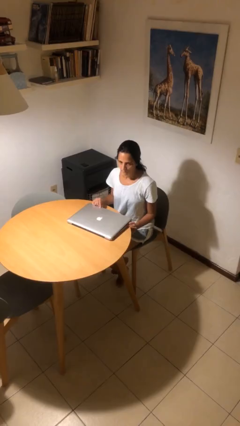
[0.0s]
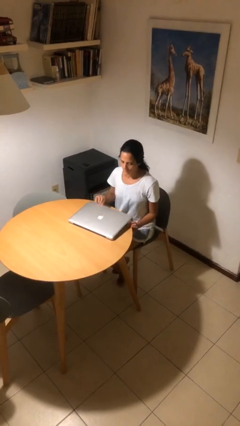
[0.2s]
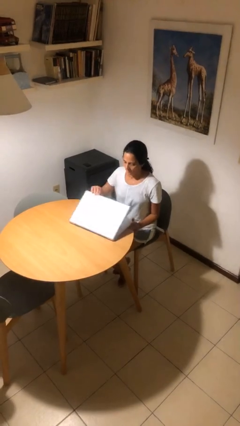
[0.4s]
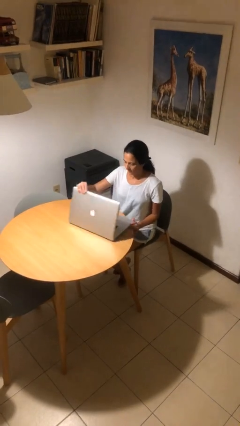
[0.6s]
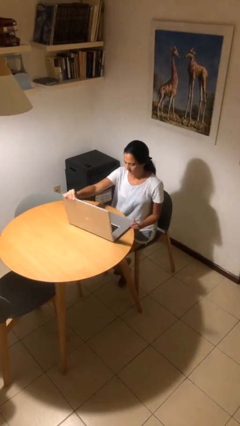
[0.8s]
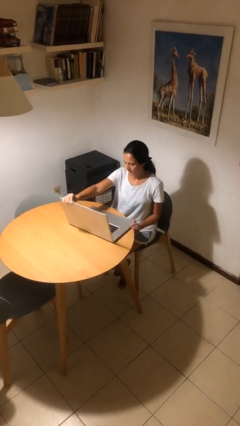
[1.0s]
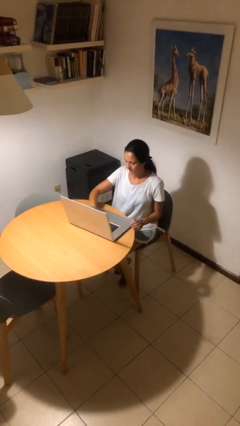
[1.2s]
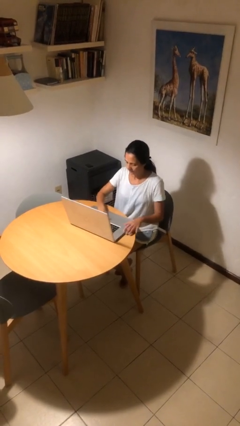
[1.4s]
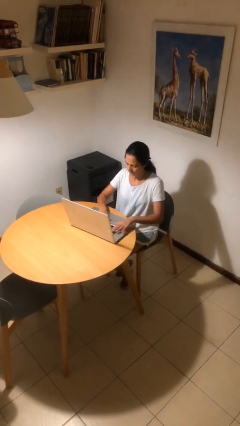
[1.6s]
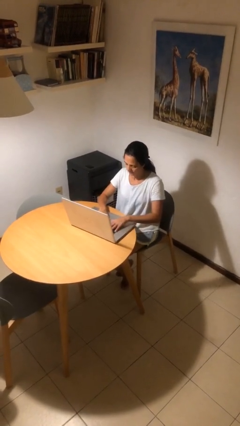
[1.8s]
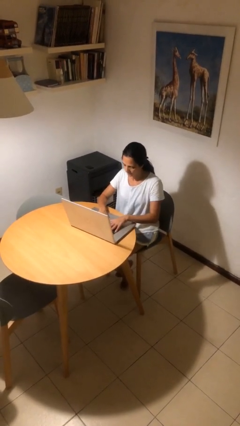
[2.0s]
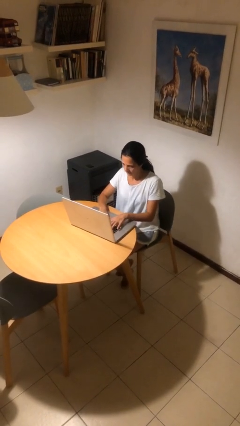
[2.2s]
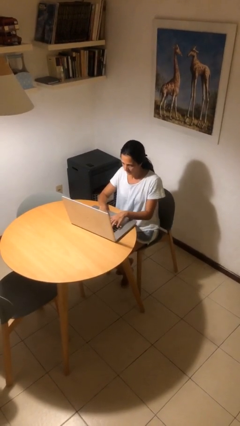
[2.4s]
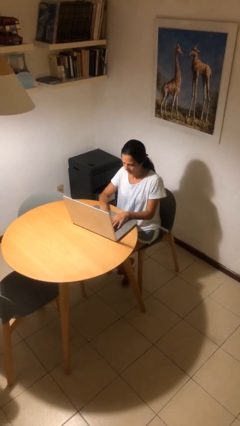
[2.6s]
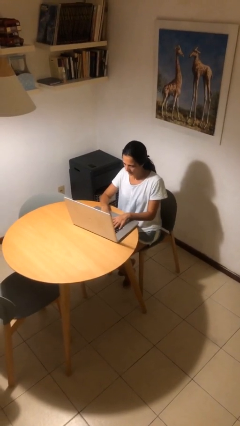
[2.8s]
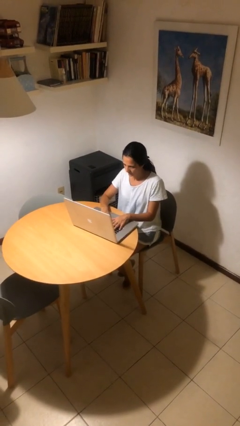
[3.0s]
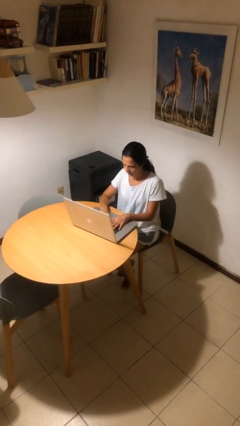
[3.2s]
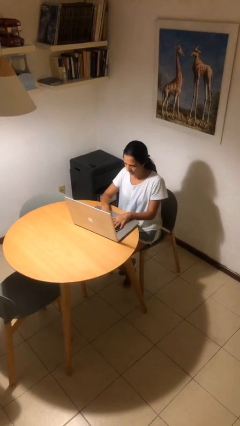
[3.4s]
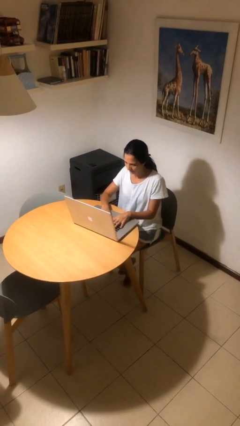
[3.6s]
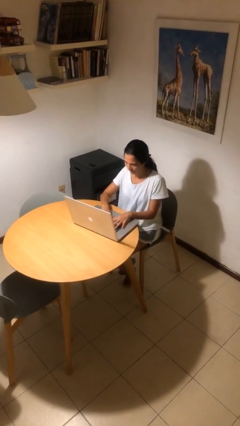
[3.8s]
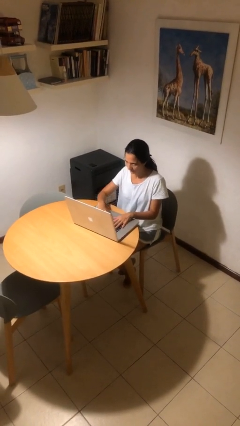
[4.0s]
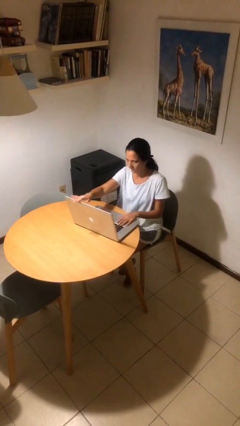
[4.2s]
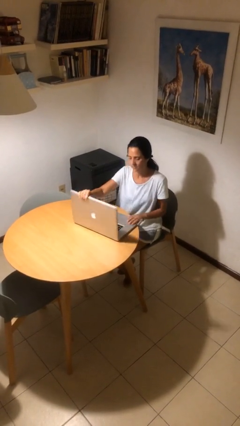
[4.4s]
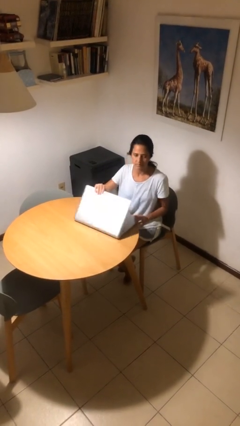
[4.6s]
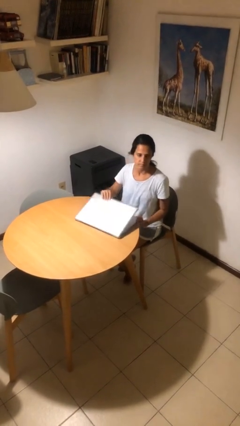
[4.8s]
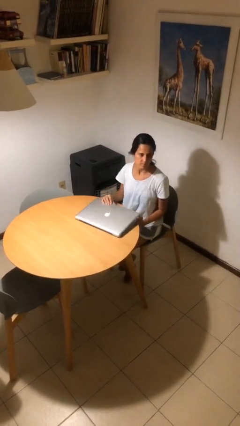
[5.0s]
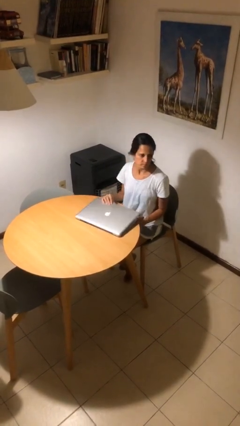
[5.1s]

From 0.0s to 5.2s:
person interacts with laptop

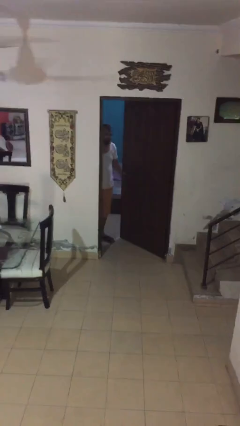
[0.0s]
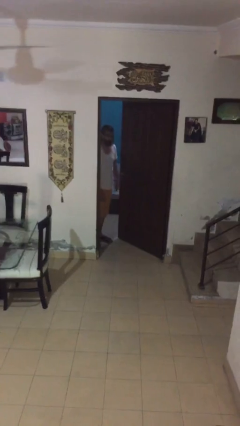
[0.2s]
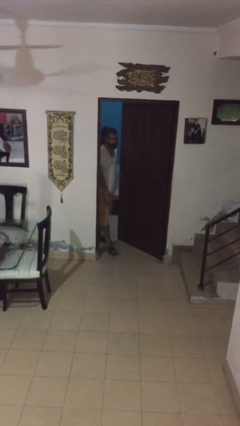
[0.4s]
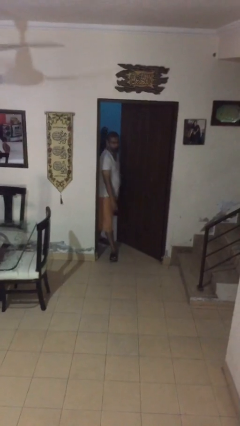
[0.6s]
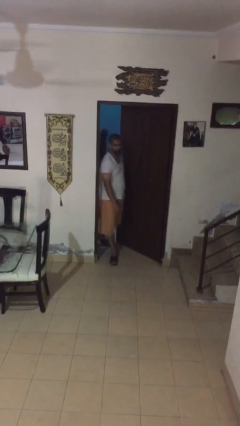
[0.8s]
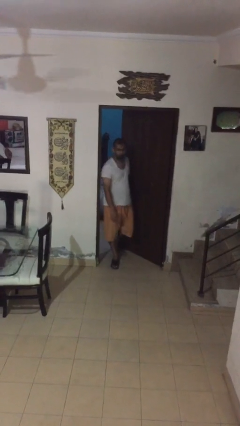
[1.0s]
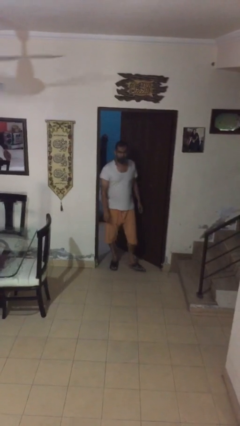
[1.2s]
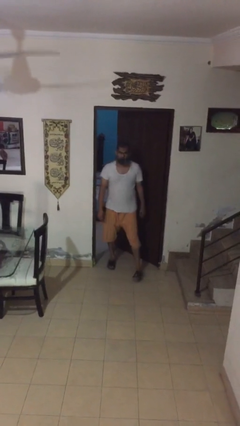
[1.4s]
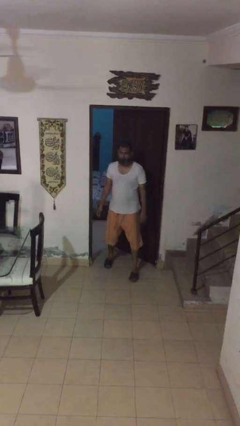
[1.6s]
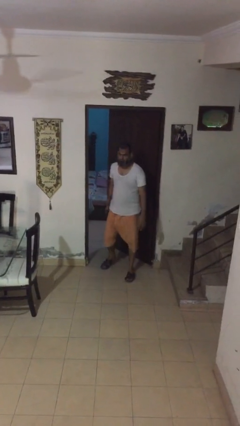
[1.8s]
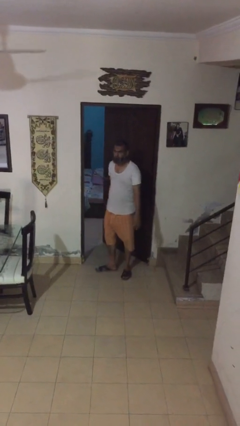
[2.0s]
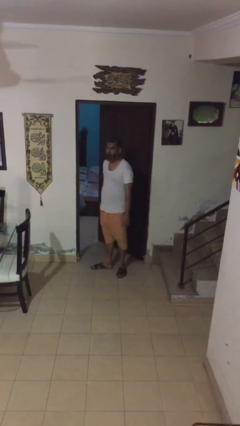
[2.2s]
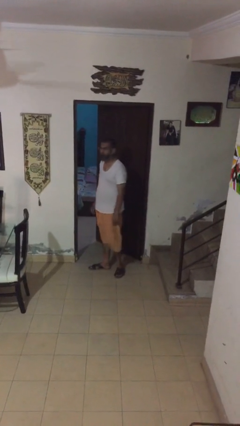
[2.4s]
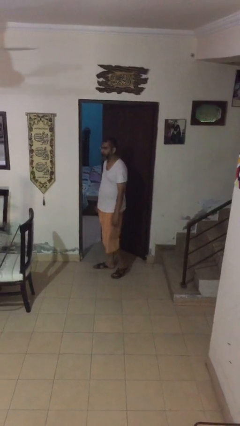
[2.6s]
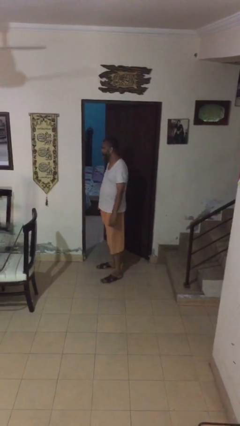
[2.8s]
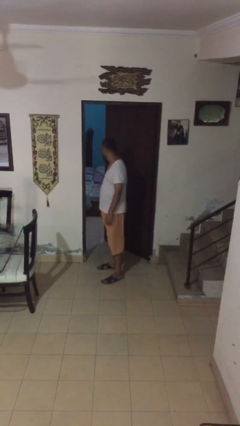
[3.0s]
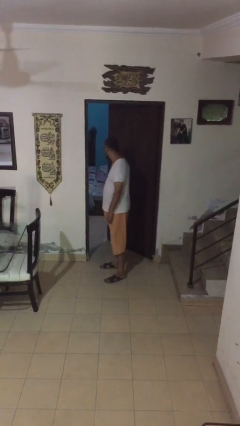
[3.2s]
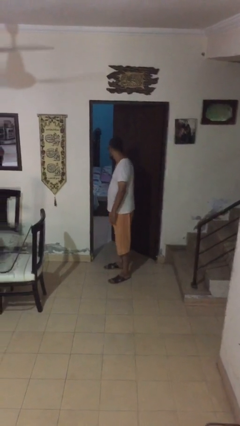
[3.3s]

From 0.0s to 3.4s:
person enters scene through structure

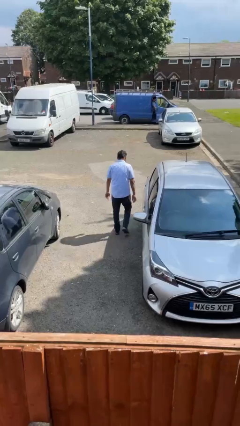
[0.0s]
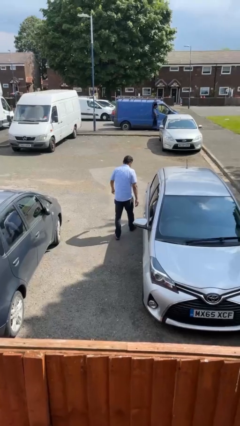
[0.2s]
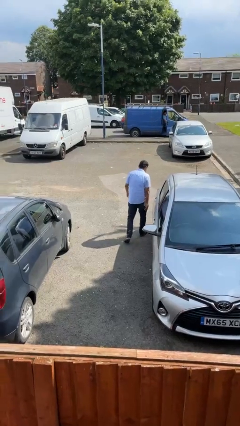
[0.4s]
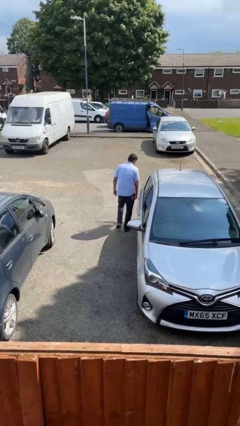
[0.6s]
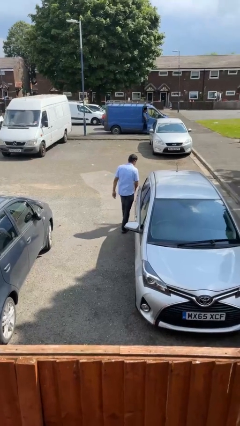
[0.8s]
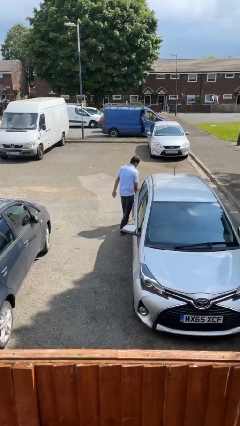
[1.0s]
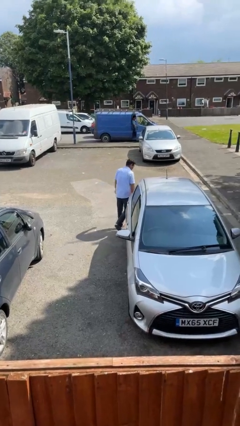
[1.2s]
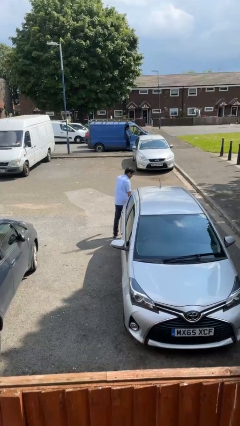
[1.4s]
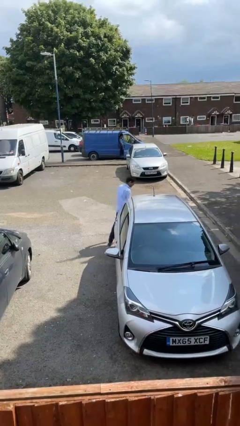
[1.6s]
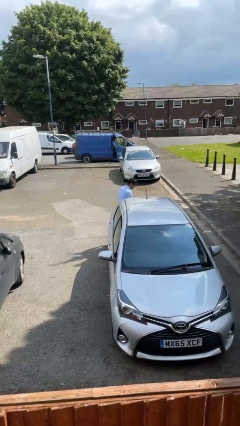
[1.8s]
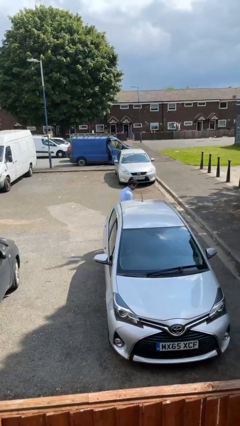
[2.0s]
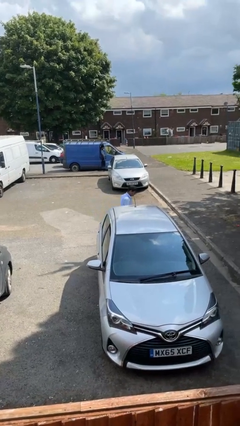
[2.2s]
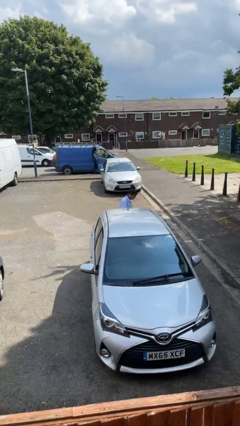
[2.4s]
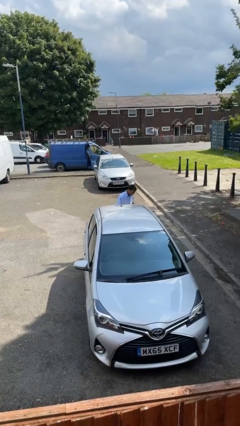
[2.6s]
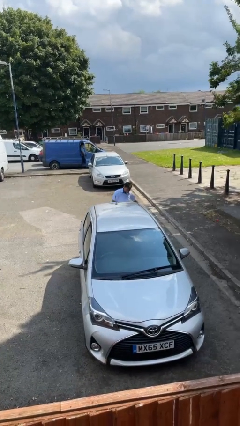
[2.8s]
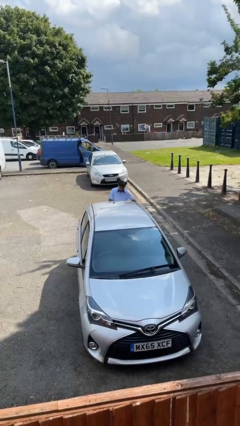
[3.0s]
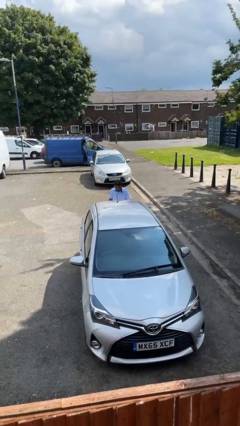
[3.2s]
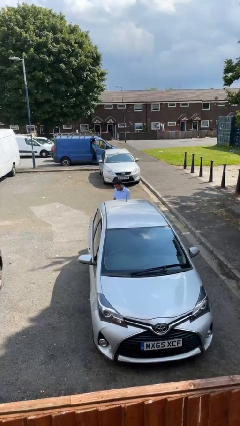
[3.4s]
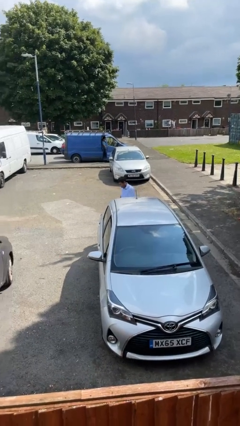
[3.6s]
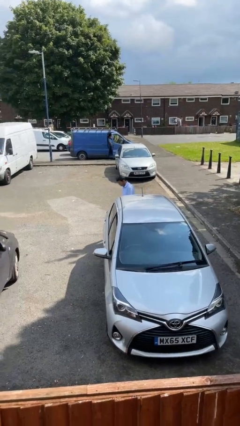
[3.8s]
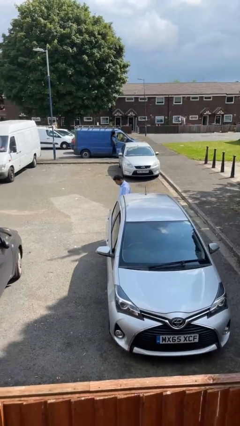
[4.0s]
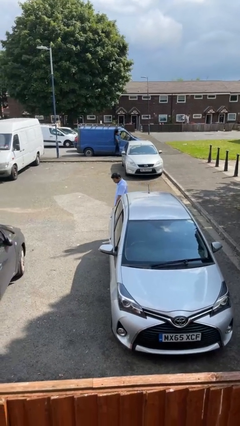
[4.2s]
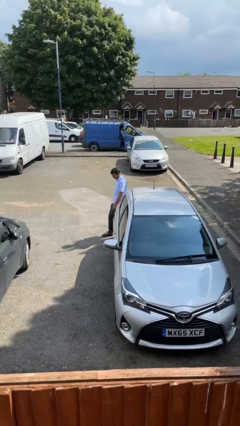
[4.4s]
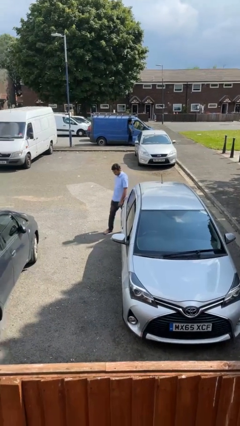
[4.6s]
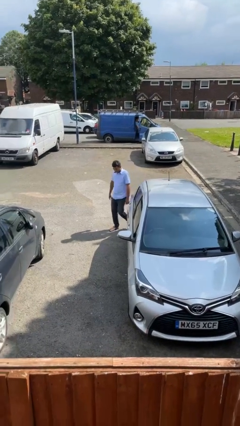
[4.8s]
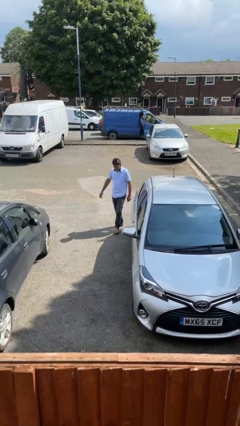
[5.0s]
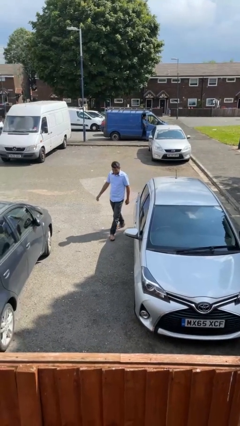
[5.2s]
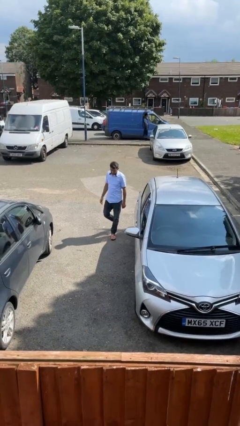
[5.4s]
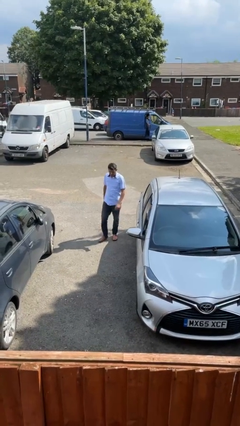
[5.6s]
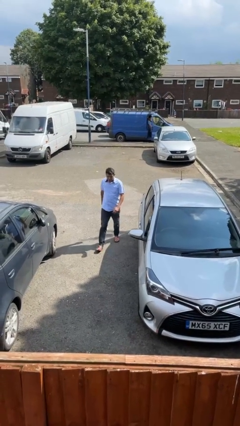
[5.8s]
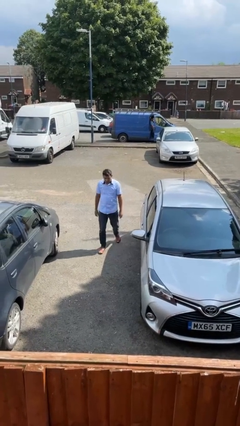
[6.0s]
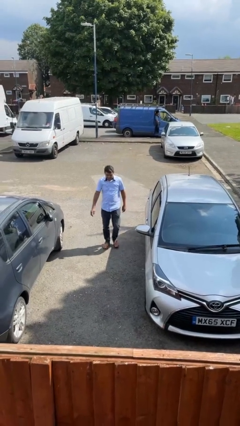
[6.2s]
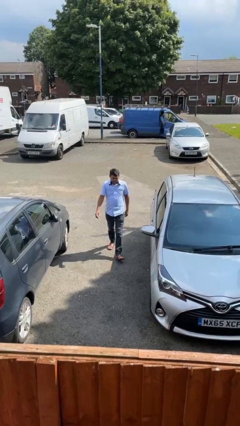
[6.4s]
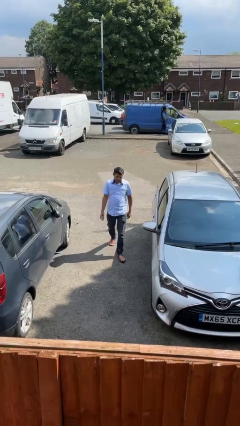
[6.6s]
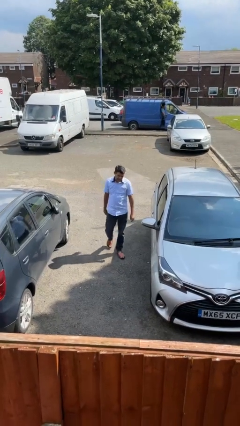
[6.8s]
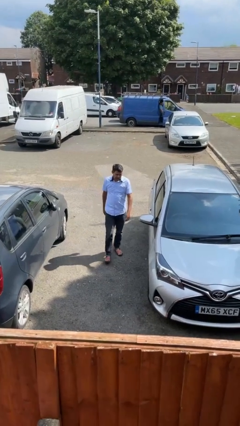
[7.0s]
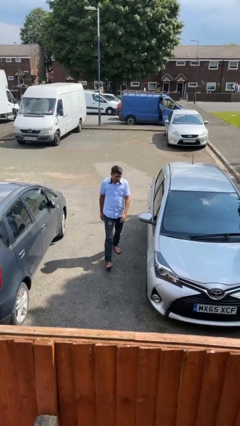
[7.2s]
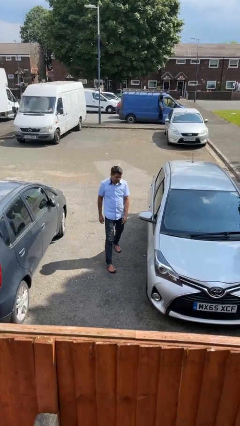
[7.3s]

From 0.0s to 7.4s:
person walks around car

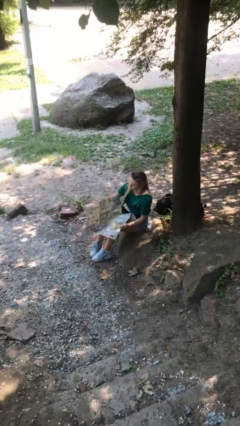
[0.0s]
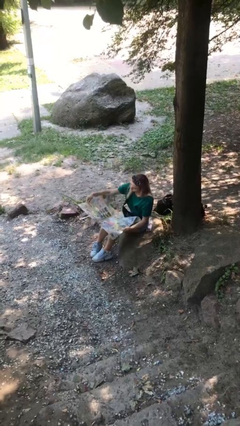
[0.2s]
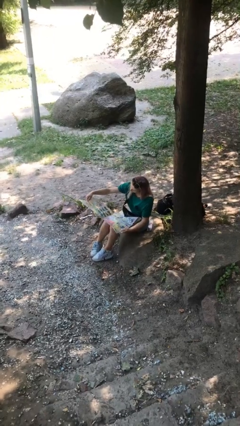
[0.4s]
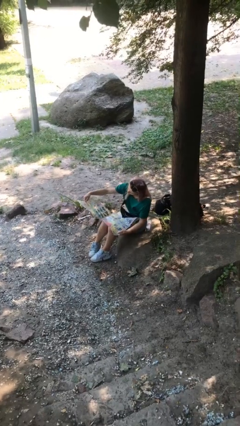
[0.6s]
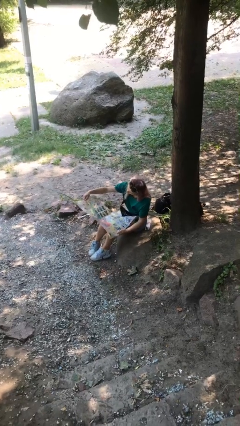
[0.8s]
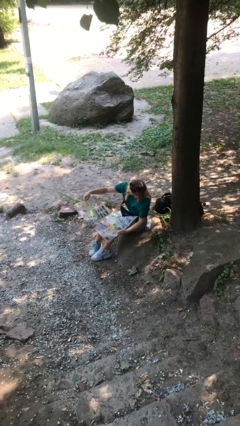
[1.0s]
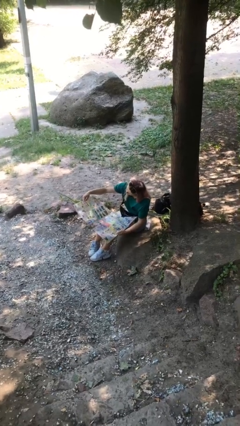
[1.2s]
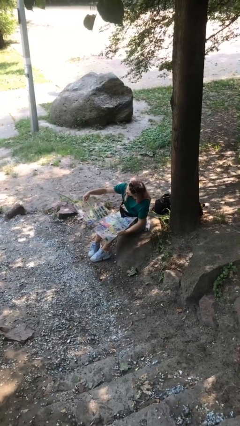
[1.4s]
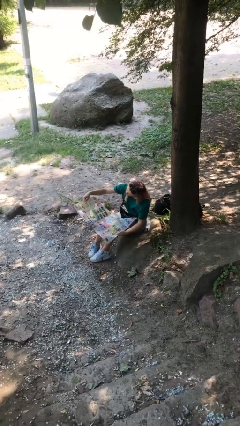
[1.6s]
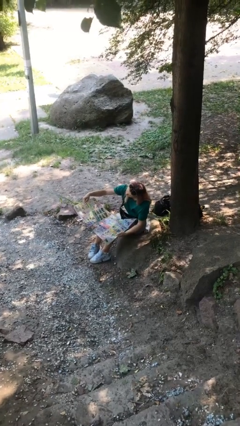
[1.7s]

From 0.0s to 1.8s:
person reads newspaper
